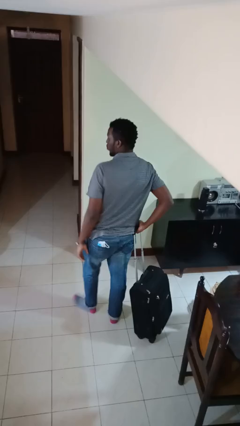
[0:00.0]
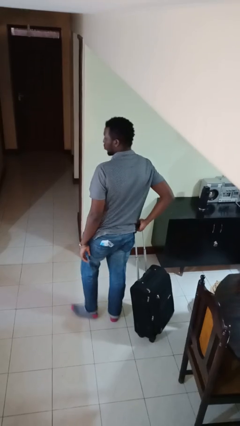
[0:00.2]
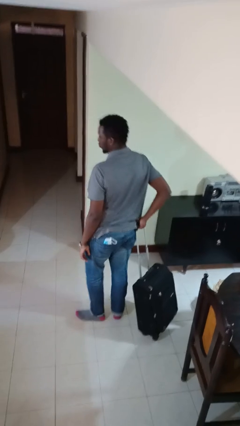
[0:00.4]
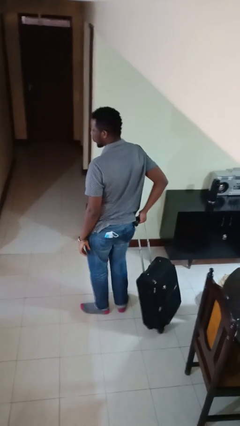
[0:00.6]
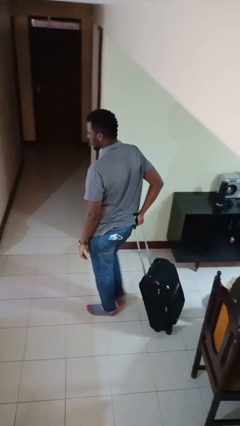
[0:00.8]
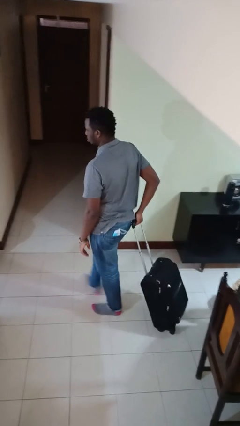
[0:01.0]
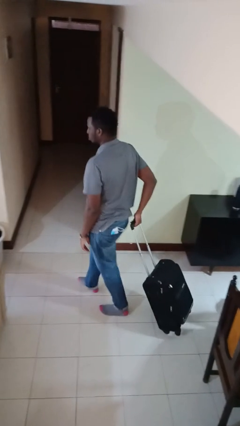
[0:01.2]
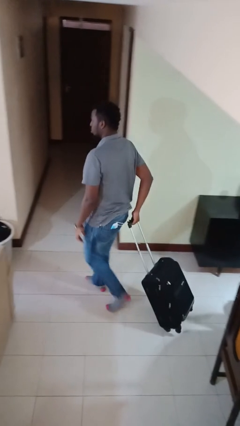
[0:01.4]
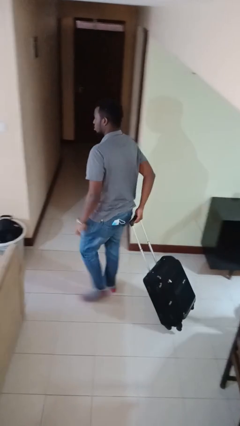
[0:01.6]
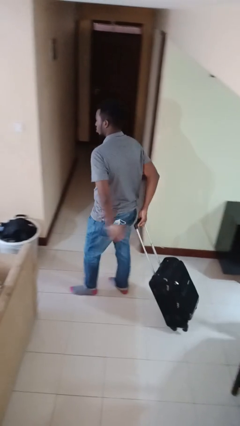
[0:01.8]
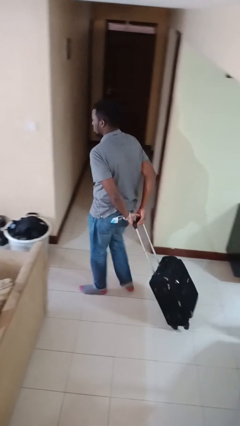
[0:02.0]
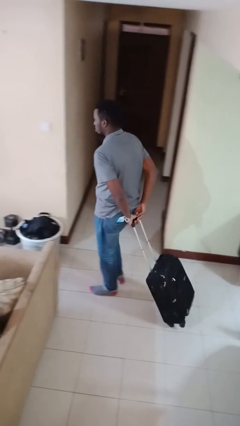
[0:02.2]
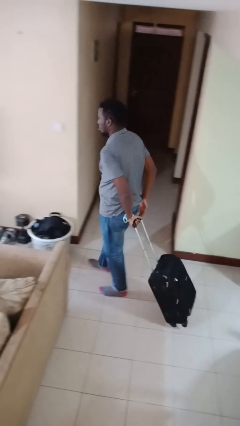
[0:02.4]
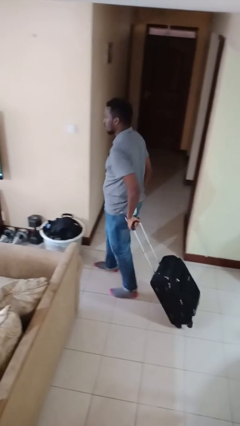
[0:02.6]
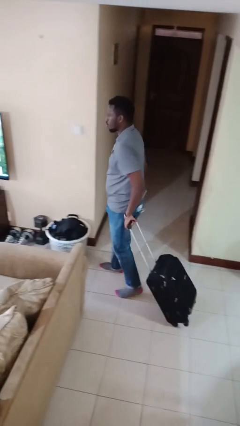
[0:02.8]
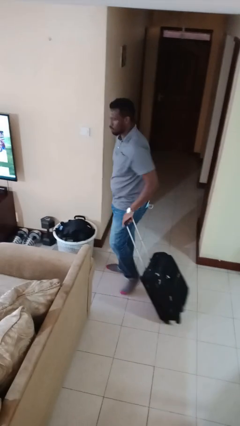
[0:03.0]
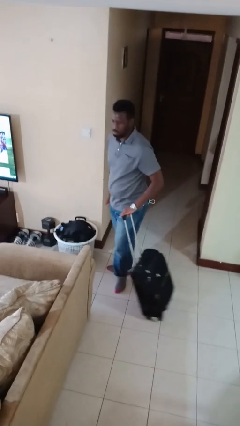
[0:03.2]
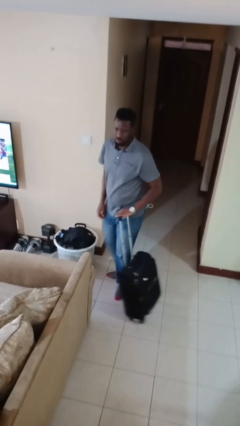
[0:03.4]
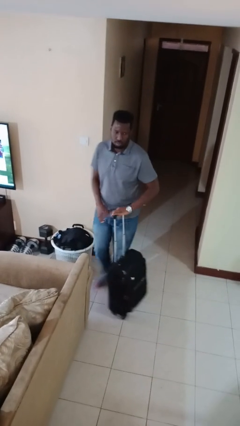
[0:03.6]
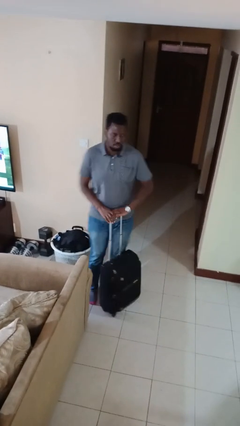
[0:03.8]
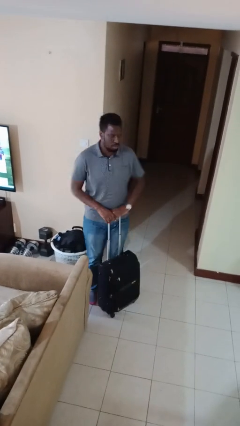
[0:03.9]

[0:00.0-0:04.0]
person pulls wheeled cart

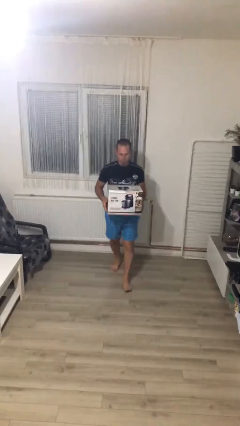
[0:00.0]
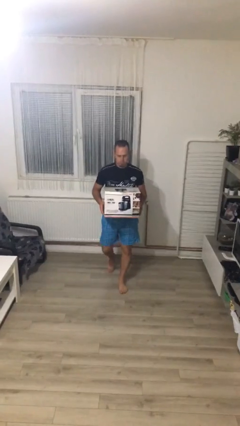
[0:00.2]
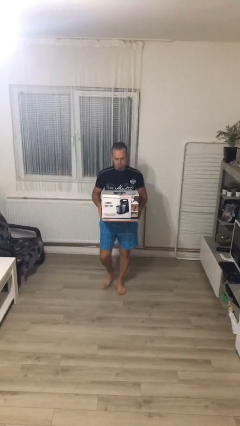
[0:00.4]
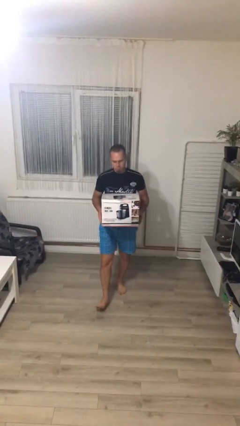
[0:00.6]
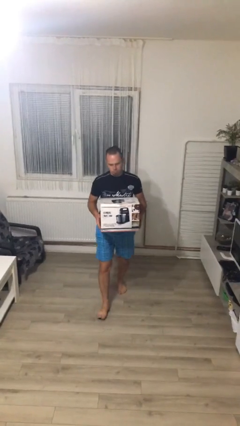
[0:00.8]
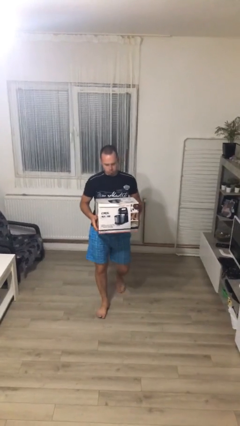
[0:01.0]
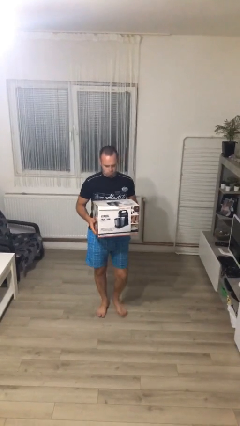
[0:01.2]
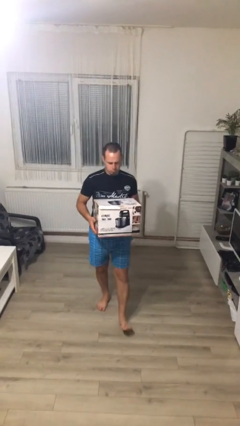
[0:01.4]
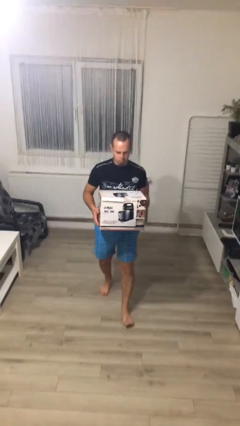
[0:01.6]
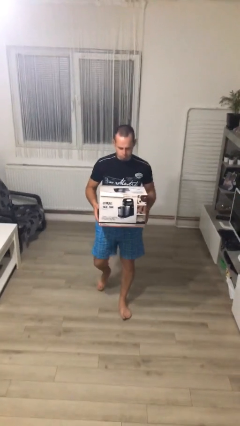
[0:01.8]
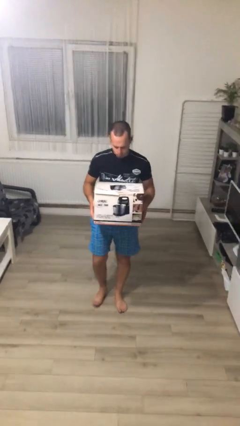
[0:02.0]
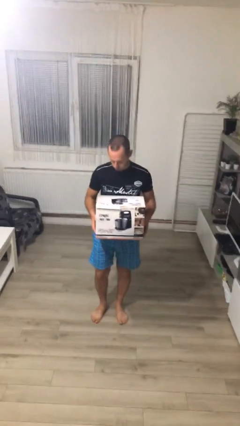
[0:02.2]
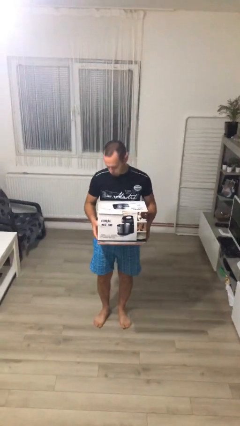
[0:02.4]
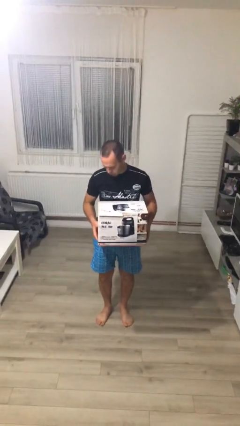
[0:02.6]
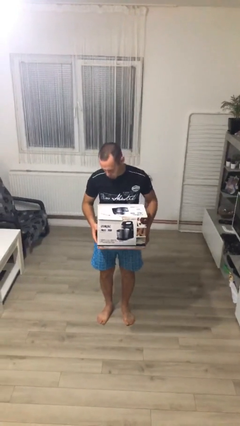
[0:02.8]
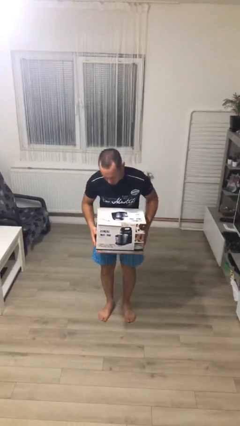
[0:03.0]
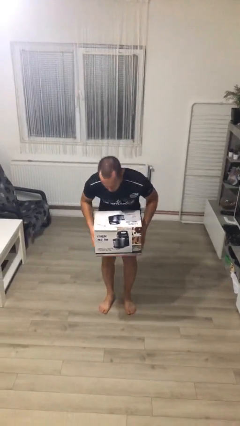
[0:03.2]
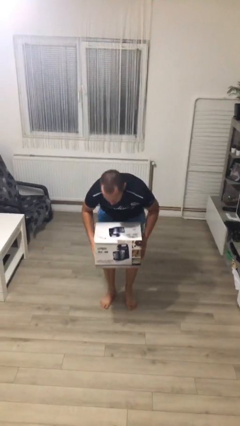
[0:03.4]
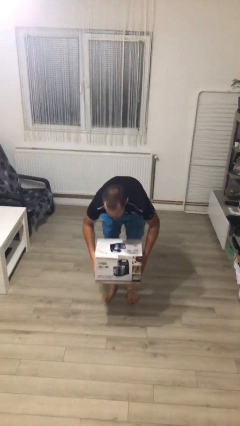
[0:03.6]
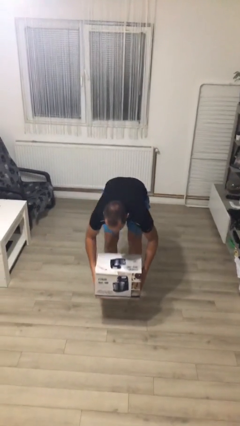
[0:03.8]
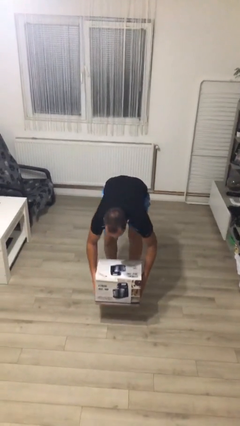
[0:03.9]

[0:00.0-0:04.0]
person carries heavy object

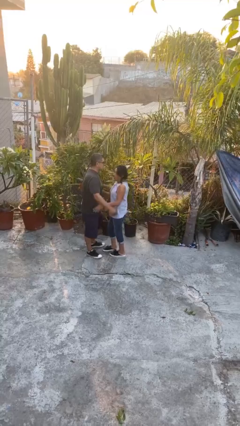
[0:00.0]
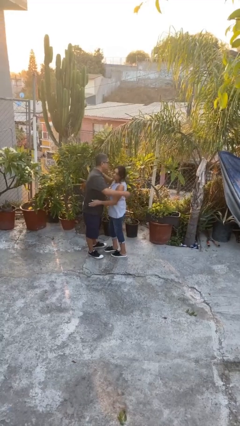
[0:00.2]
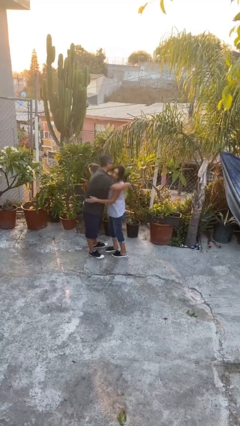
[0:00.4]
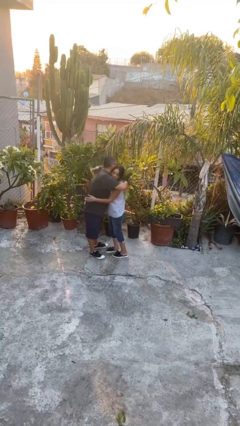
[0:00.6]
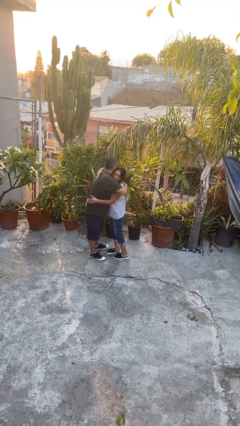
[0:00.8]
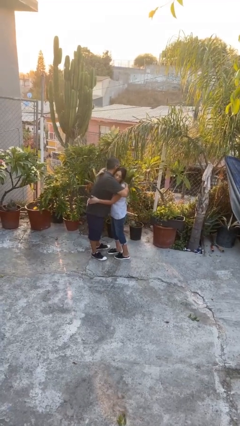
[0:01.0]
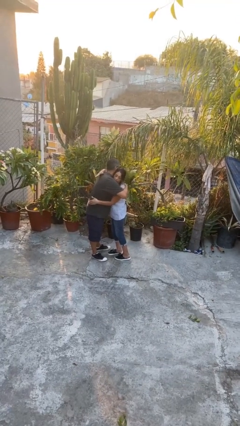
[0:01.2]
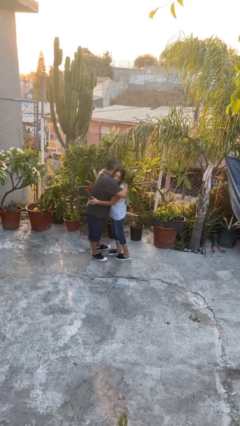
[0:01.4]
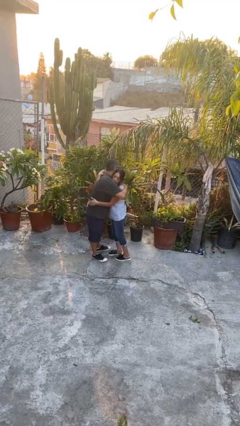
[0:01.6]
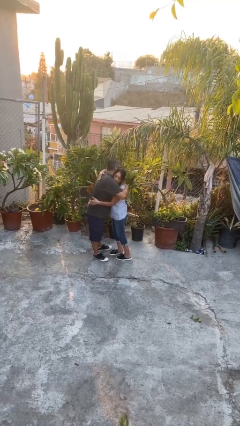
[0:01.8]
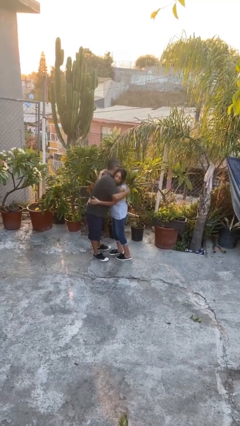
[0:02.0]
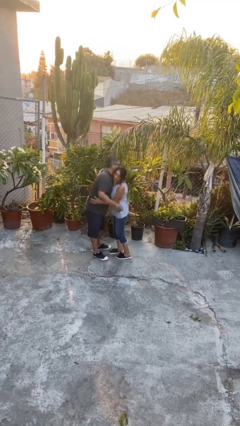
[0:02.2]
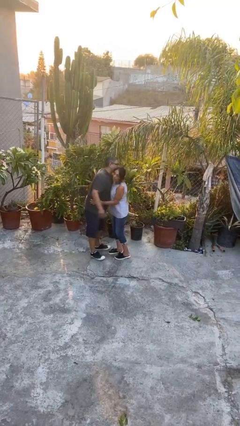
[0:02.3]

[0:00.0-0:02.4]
person embraces person

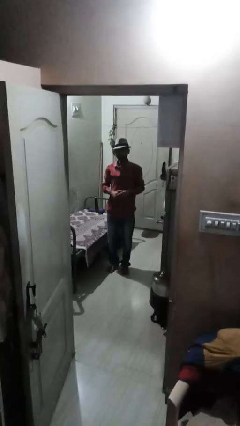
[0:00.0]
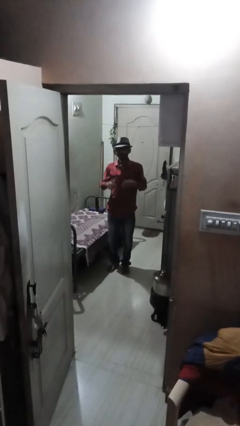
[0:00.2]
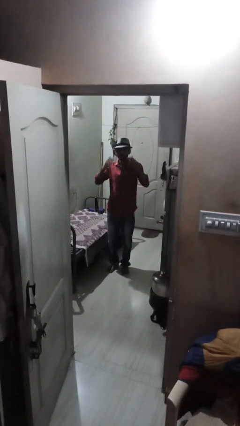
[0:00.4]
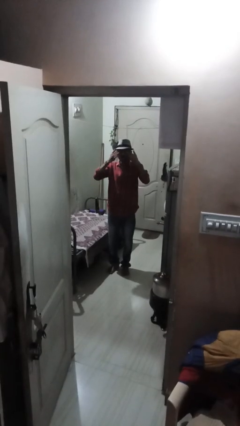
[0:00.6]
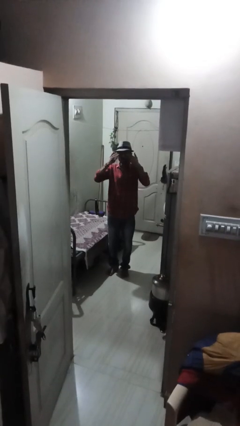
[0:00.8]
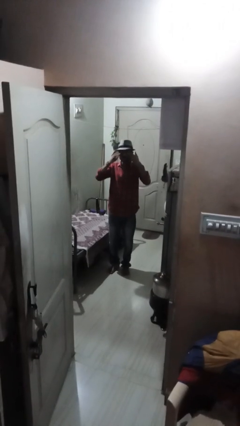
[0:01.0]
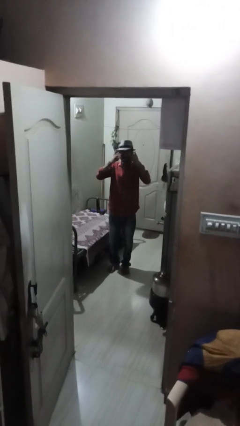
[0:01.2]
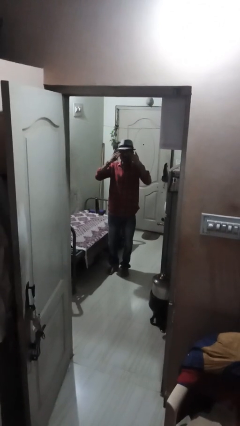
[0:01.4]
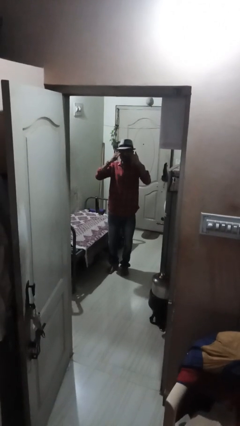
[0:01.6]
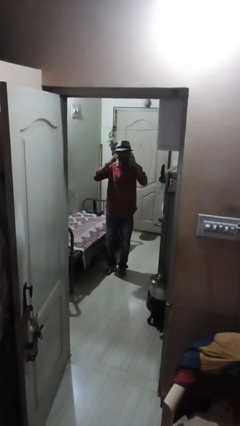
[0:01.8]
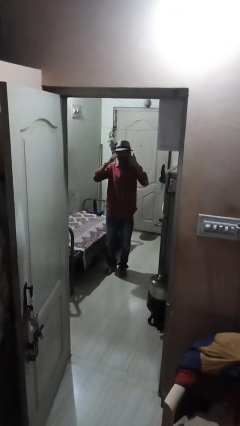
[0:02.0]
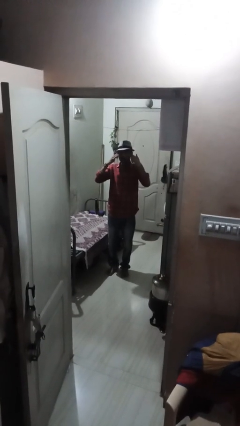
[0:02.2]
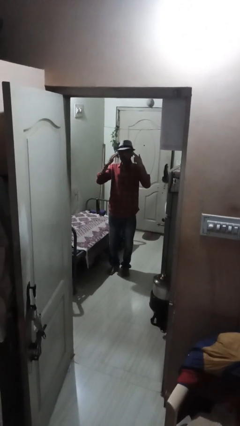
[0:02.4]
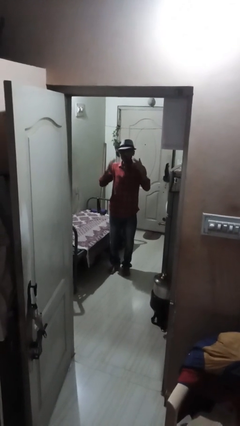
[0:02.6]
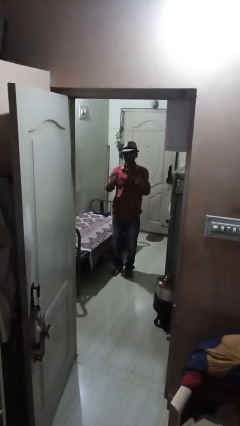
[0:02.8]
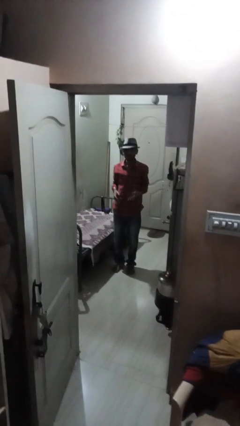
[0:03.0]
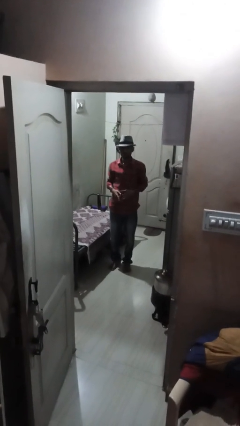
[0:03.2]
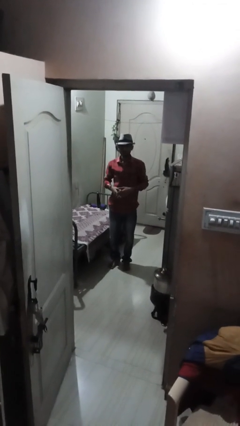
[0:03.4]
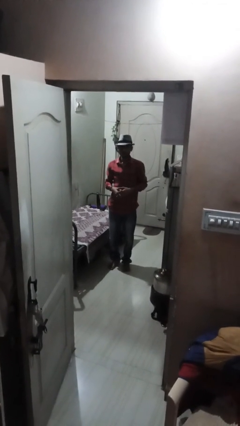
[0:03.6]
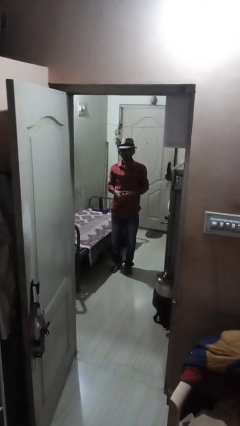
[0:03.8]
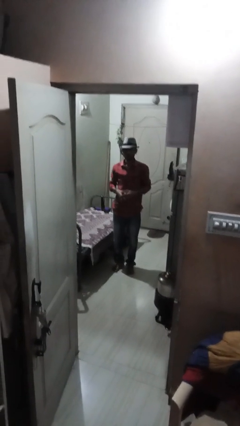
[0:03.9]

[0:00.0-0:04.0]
person rubs eyes

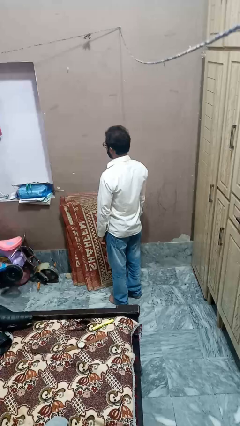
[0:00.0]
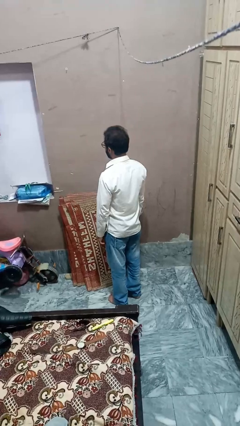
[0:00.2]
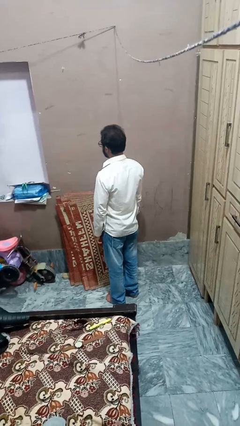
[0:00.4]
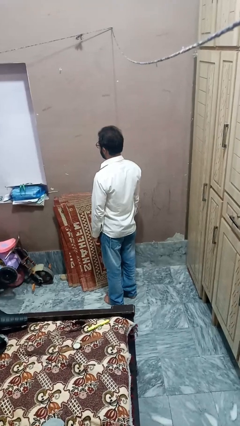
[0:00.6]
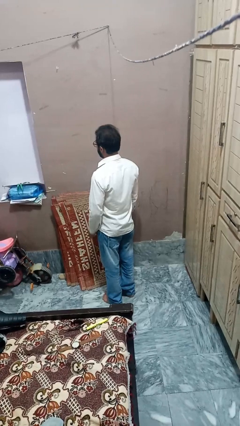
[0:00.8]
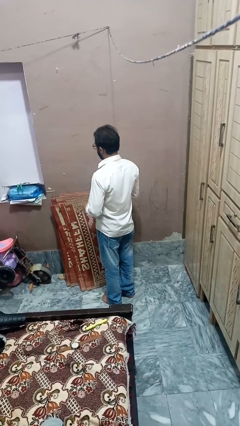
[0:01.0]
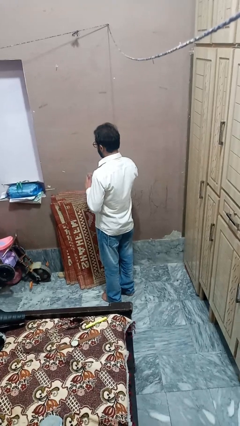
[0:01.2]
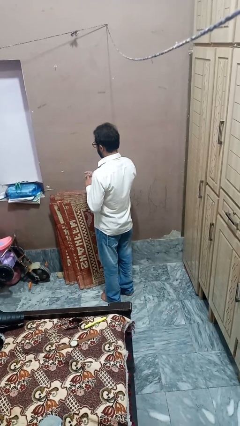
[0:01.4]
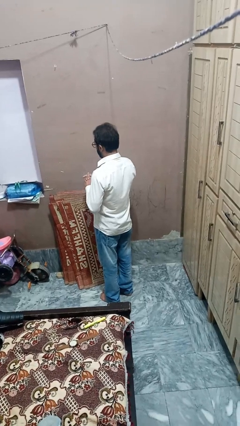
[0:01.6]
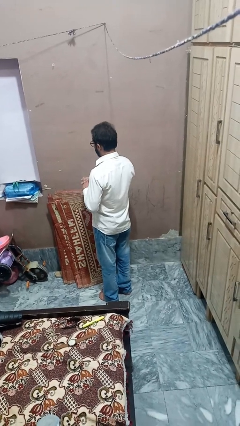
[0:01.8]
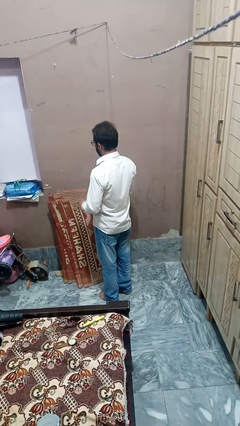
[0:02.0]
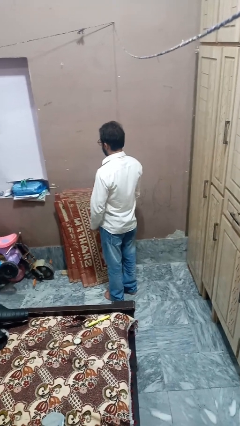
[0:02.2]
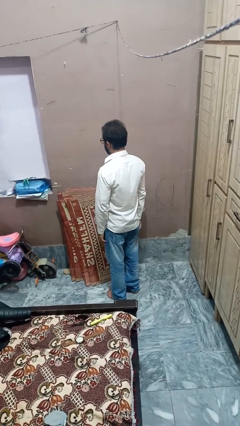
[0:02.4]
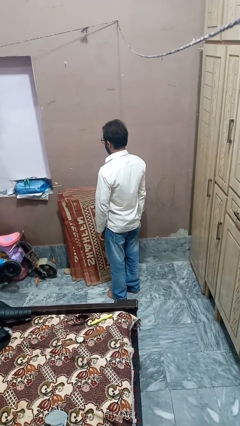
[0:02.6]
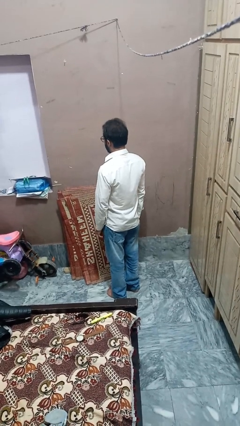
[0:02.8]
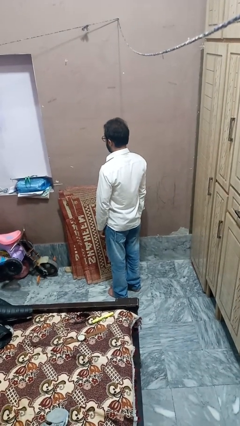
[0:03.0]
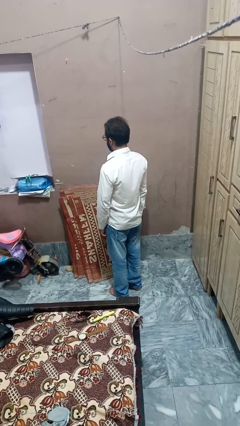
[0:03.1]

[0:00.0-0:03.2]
person puts on ring

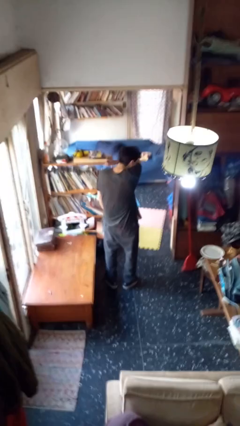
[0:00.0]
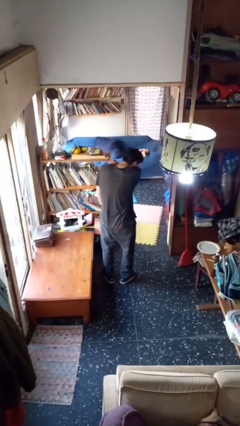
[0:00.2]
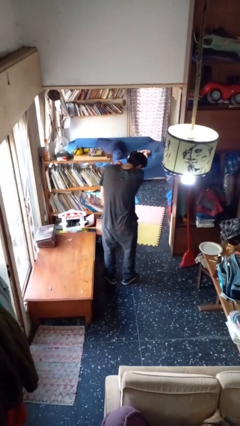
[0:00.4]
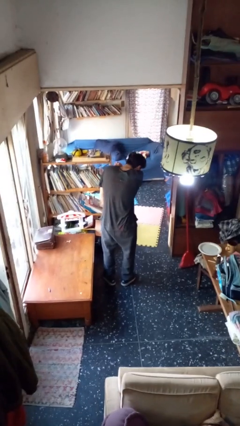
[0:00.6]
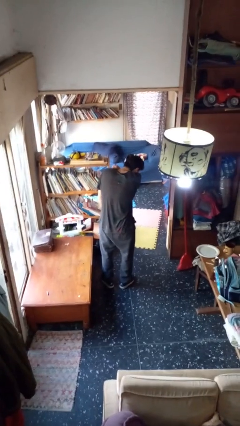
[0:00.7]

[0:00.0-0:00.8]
person sneezes into arm
